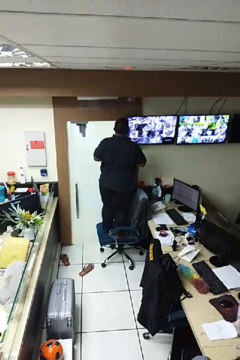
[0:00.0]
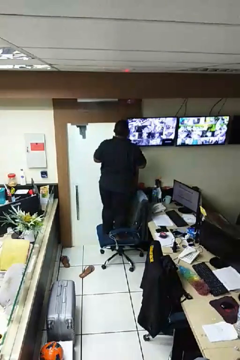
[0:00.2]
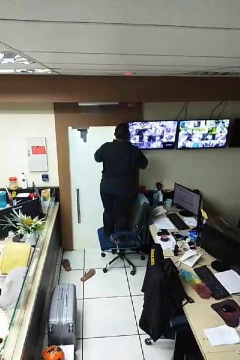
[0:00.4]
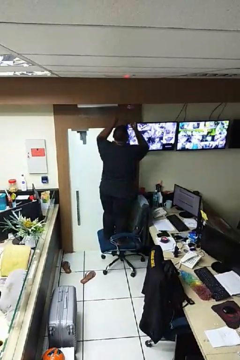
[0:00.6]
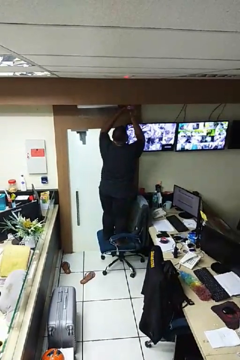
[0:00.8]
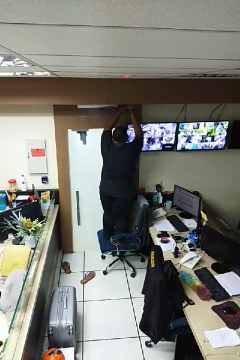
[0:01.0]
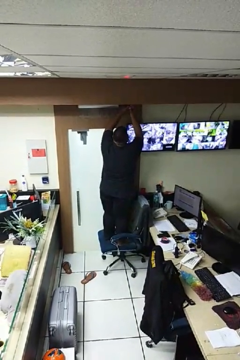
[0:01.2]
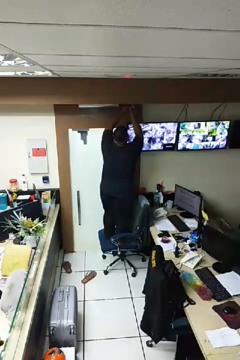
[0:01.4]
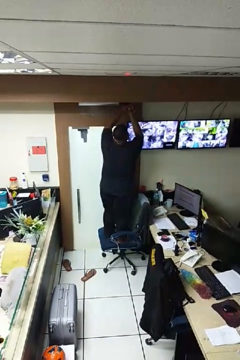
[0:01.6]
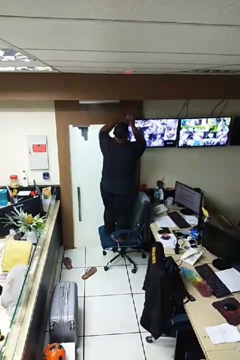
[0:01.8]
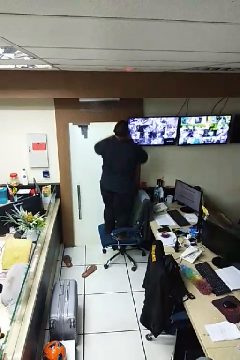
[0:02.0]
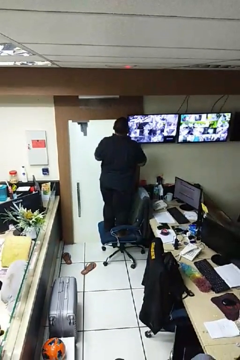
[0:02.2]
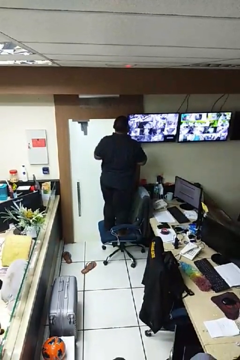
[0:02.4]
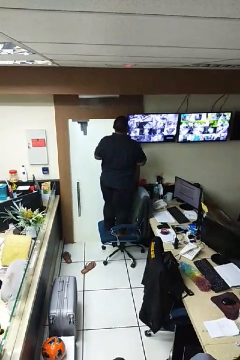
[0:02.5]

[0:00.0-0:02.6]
person takes down smoke detector

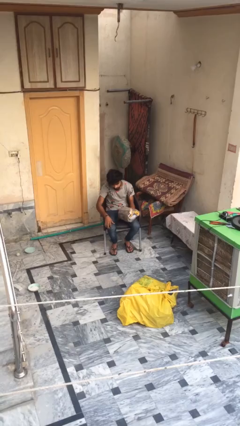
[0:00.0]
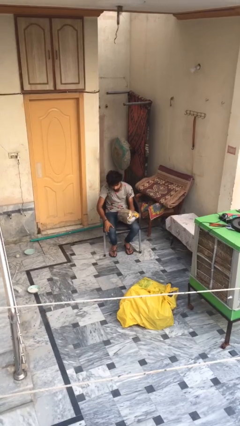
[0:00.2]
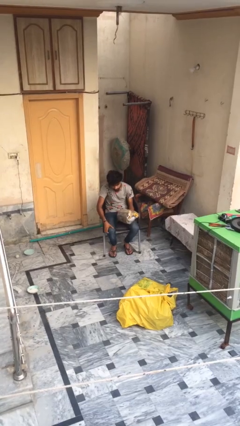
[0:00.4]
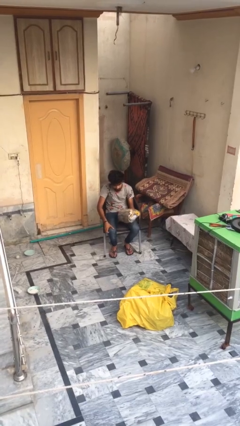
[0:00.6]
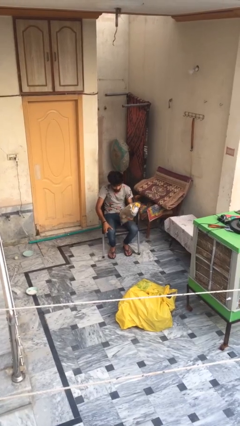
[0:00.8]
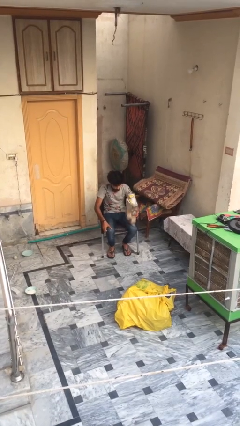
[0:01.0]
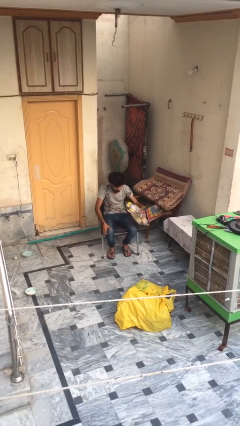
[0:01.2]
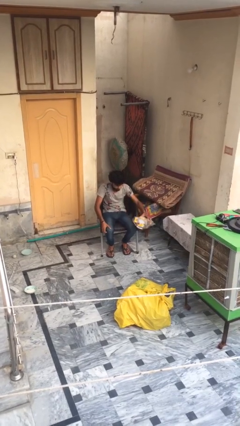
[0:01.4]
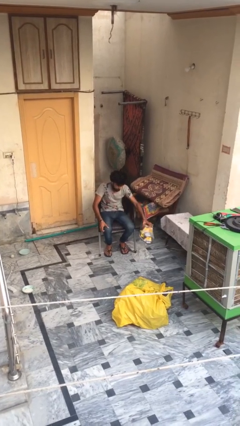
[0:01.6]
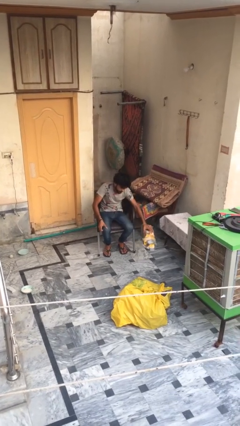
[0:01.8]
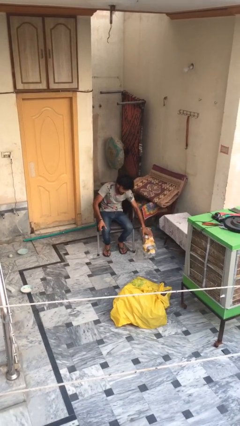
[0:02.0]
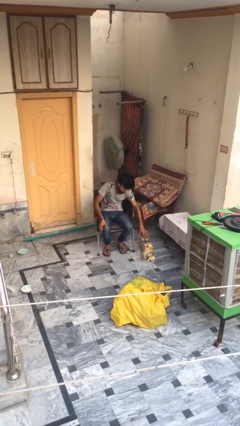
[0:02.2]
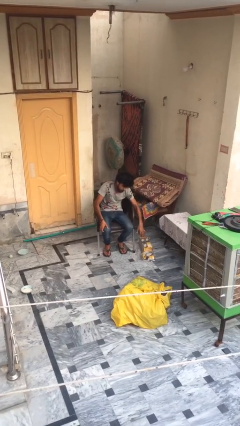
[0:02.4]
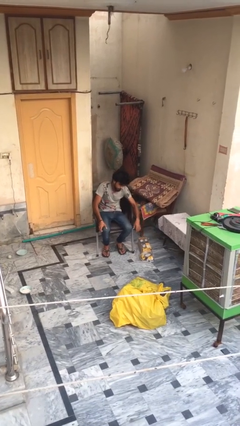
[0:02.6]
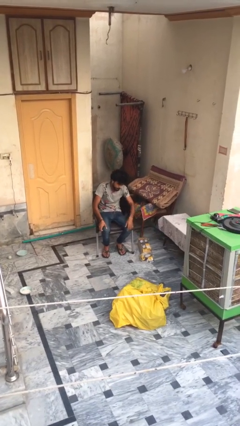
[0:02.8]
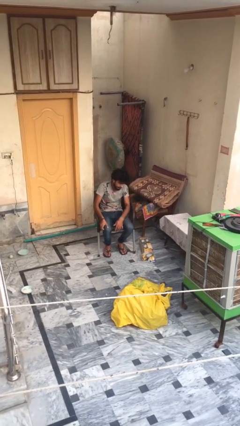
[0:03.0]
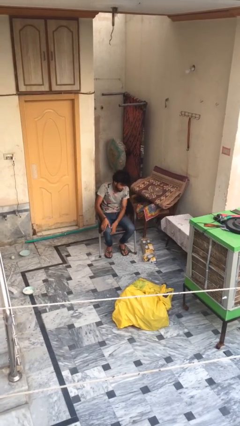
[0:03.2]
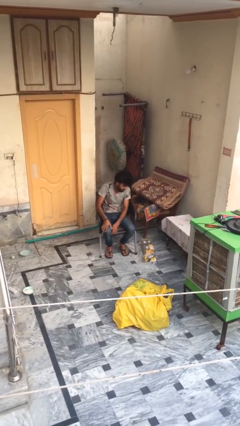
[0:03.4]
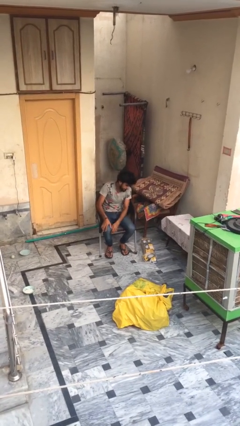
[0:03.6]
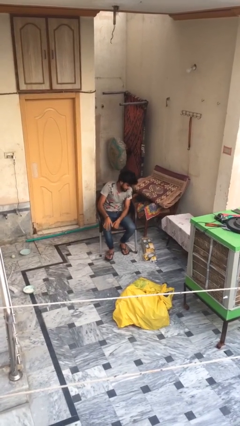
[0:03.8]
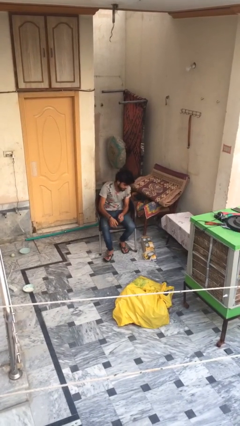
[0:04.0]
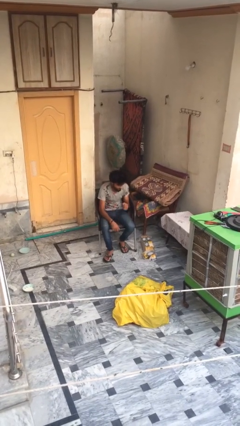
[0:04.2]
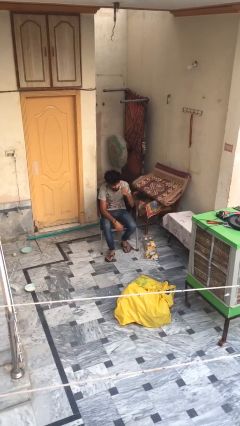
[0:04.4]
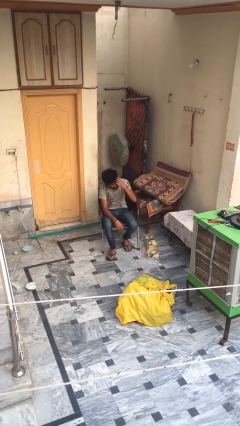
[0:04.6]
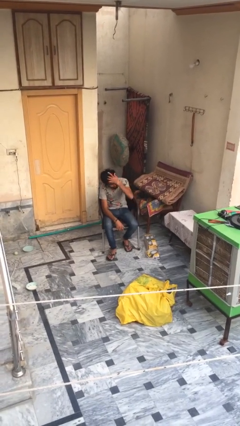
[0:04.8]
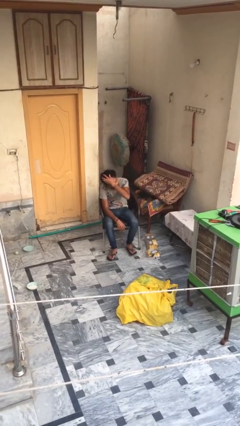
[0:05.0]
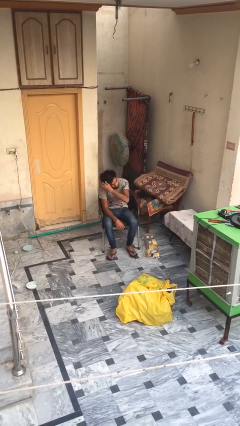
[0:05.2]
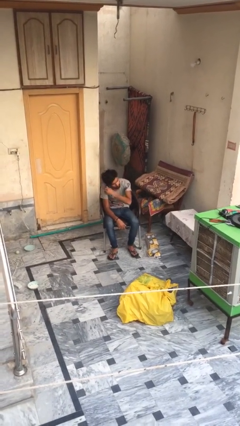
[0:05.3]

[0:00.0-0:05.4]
person puts down object on floor

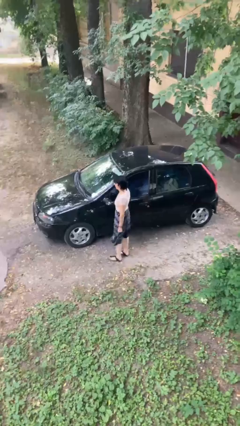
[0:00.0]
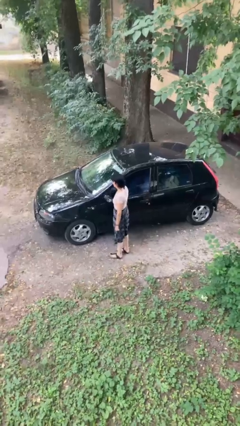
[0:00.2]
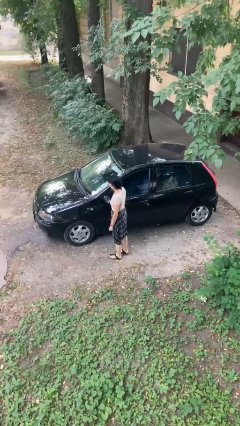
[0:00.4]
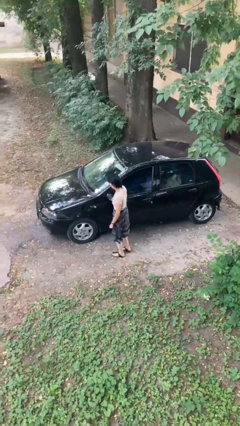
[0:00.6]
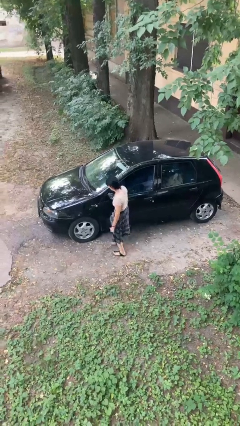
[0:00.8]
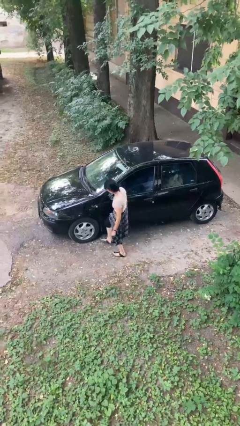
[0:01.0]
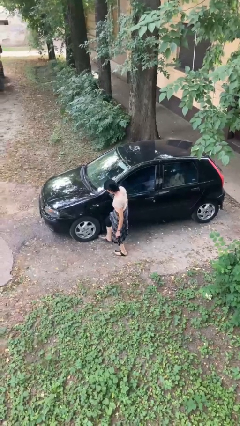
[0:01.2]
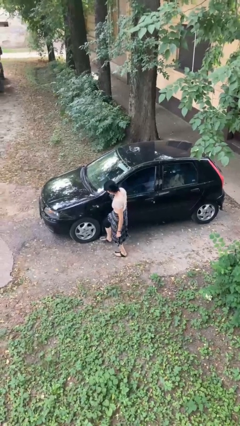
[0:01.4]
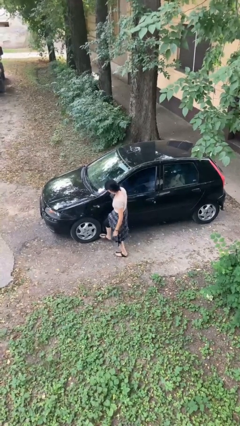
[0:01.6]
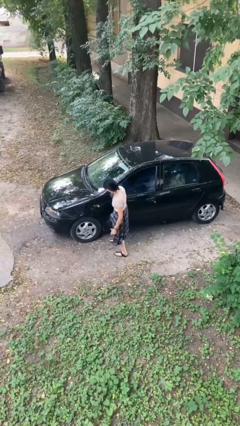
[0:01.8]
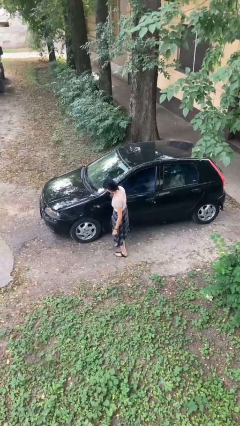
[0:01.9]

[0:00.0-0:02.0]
person kicks car tires

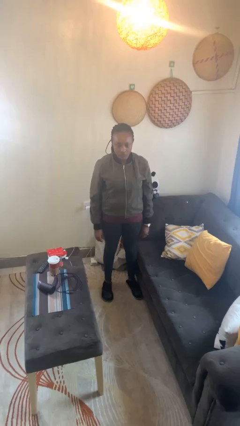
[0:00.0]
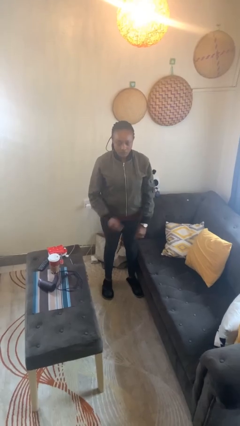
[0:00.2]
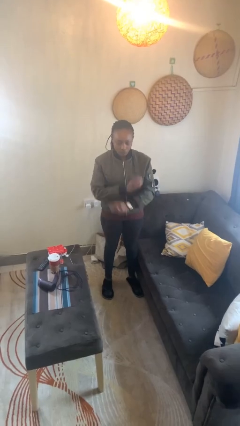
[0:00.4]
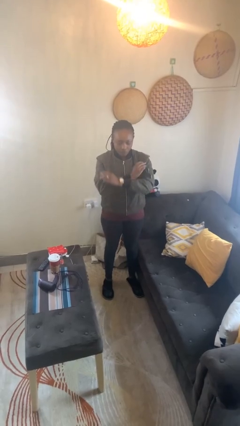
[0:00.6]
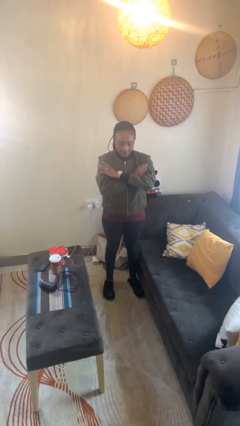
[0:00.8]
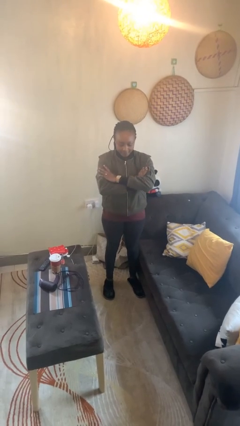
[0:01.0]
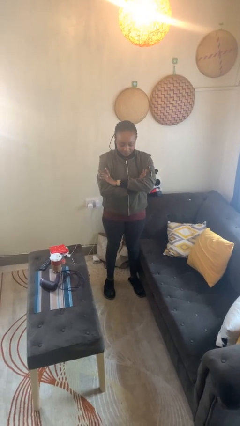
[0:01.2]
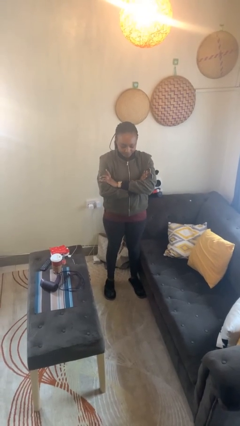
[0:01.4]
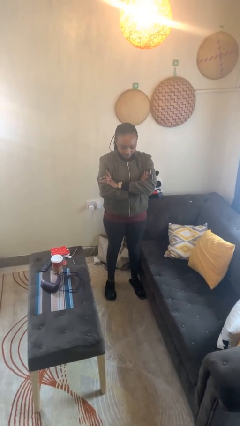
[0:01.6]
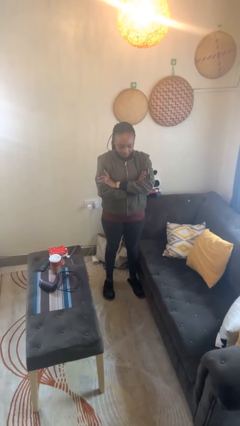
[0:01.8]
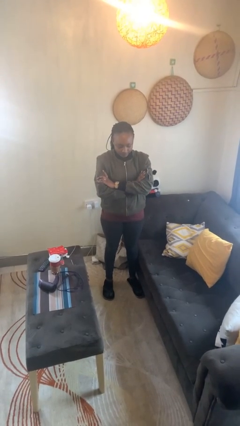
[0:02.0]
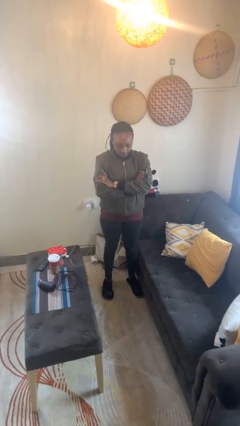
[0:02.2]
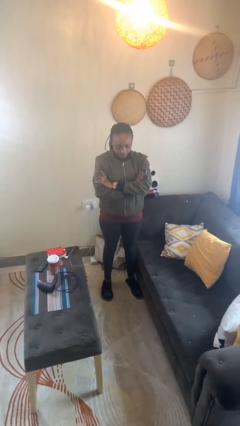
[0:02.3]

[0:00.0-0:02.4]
person gestures arms x

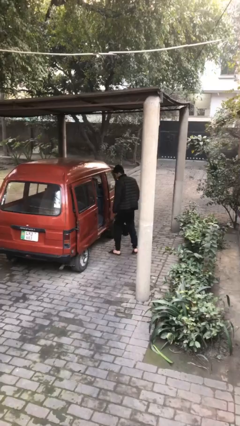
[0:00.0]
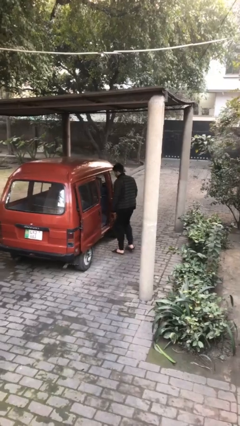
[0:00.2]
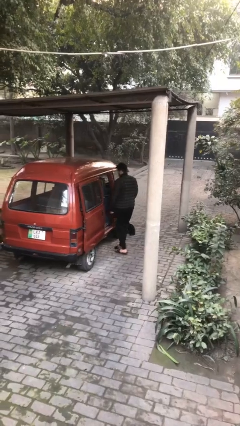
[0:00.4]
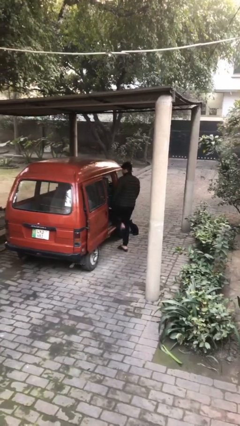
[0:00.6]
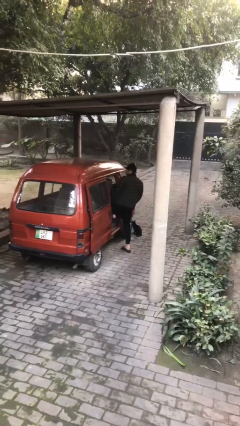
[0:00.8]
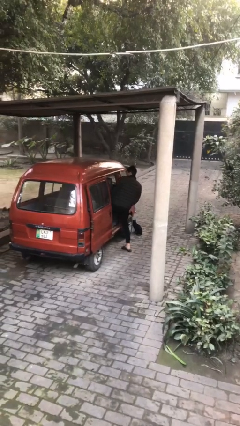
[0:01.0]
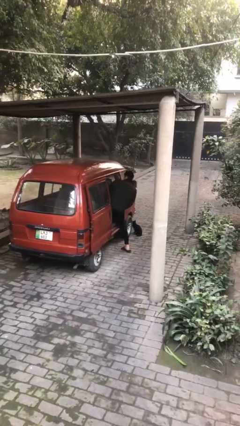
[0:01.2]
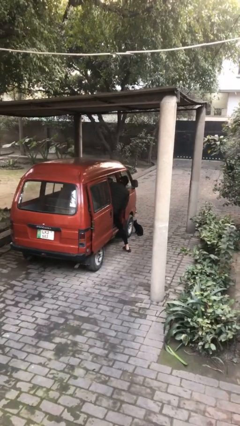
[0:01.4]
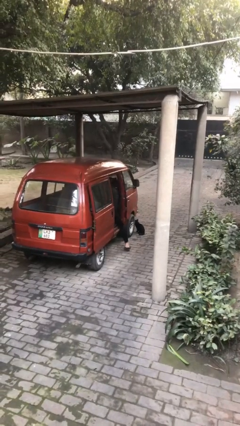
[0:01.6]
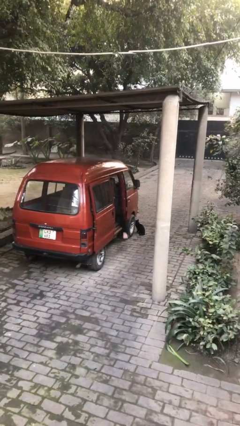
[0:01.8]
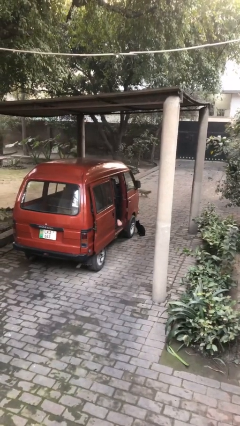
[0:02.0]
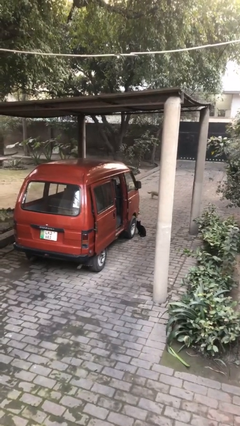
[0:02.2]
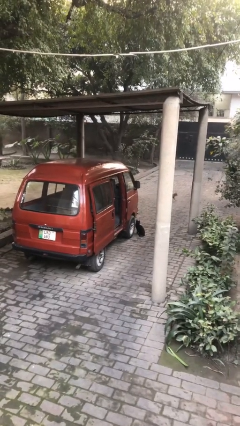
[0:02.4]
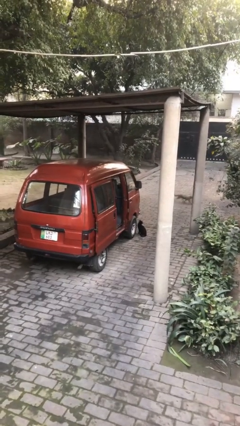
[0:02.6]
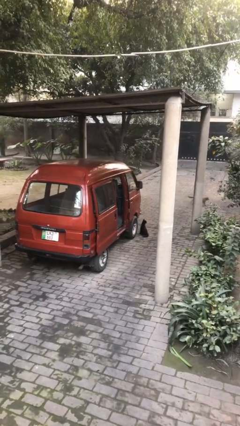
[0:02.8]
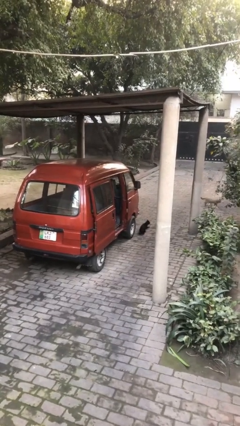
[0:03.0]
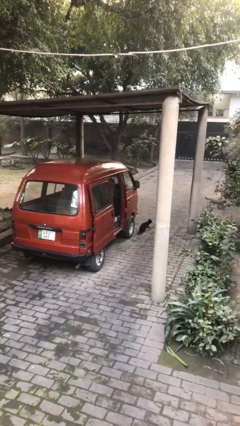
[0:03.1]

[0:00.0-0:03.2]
person enters car

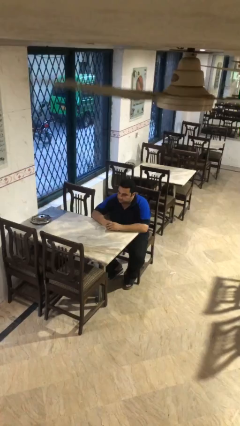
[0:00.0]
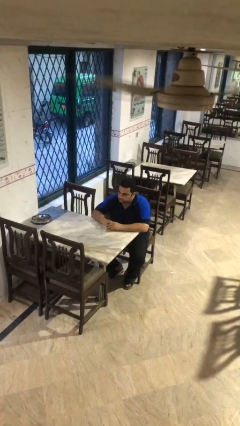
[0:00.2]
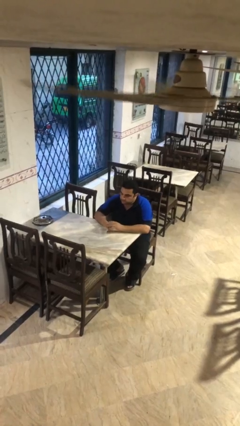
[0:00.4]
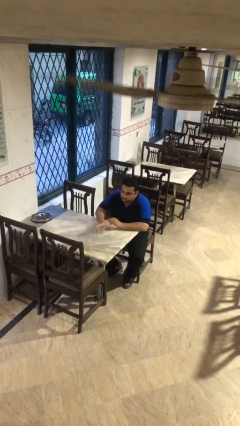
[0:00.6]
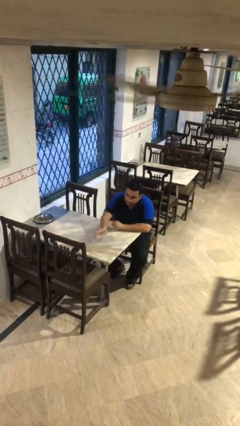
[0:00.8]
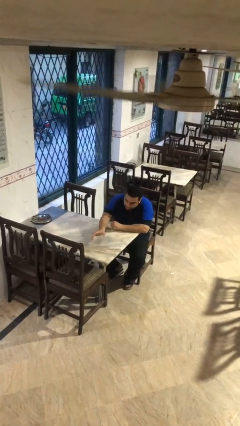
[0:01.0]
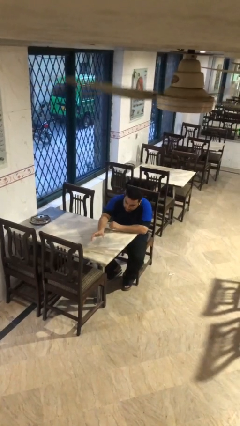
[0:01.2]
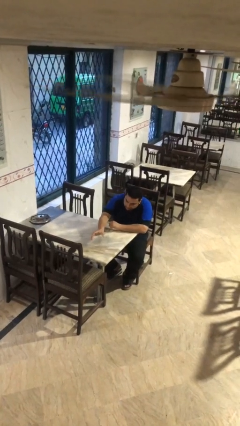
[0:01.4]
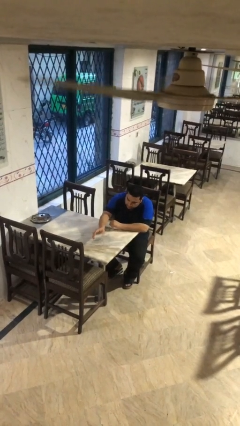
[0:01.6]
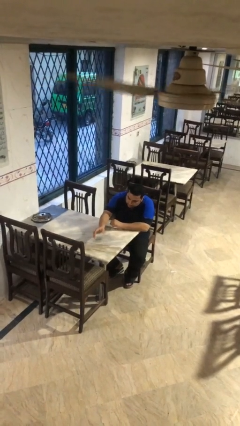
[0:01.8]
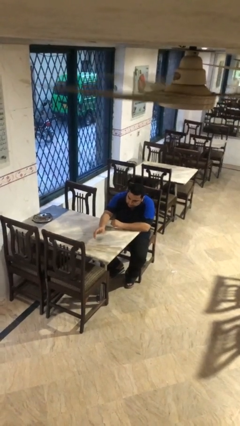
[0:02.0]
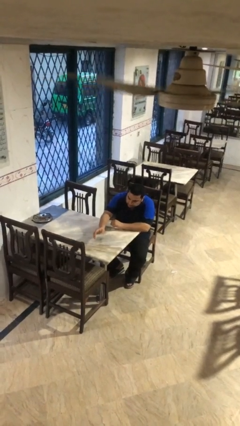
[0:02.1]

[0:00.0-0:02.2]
person knocks over glass
